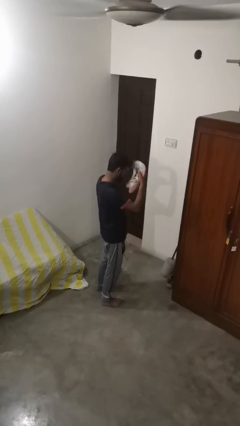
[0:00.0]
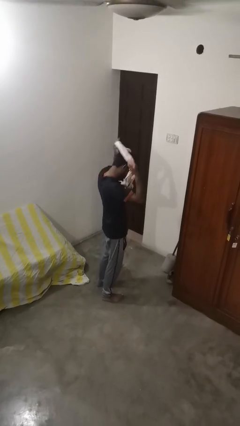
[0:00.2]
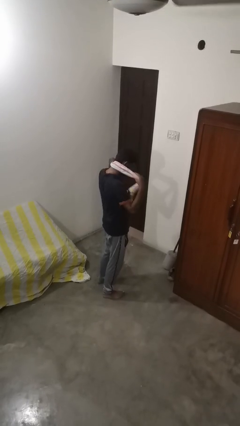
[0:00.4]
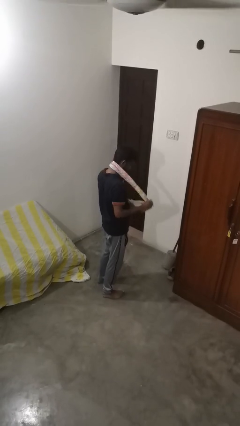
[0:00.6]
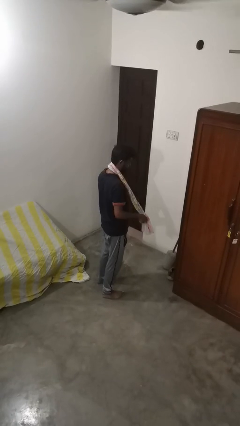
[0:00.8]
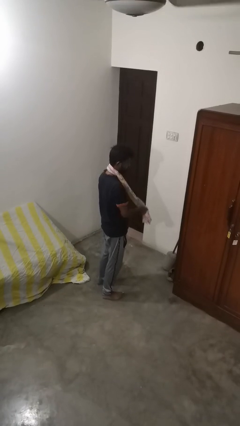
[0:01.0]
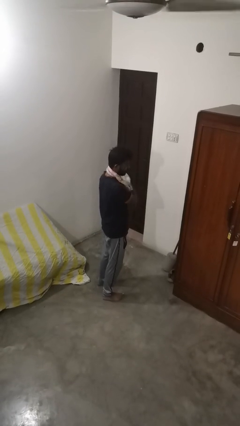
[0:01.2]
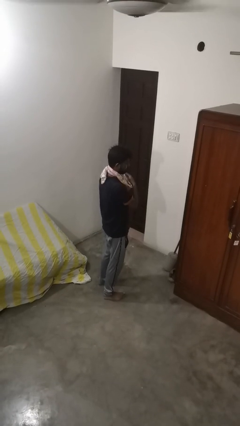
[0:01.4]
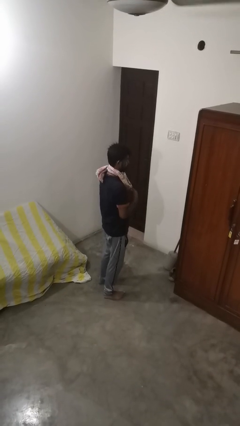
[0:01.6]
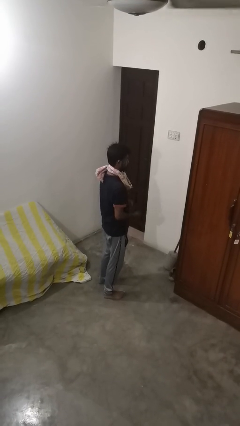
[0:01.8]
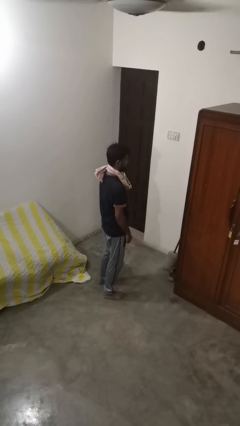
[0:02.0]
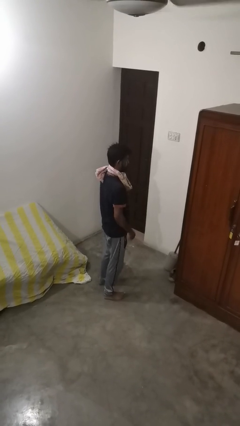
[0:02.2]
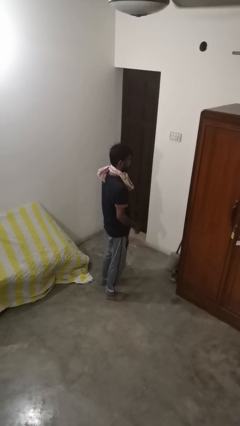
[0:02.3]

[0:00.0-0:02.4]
person puts on scarf

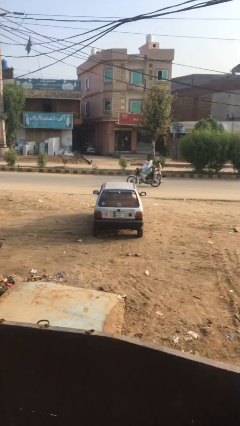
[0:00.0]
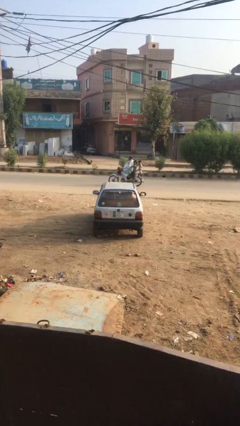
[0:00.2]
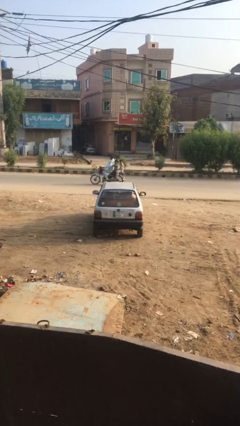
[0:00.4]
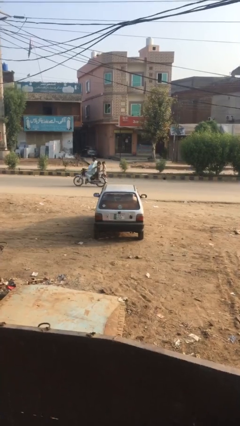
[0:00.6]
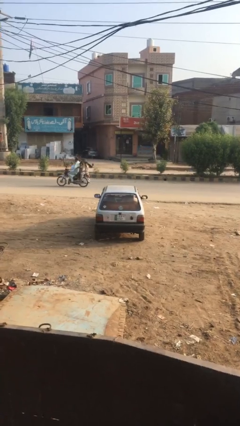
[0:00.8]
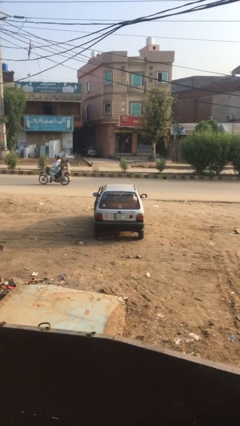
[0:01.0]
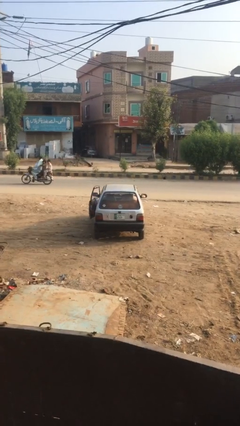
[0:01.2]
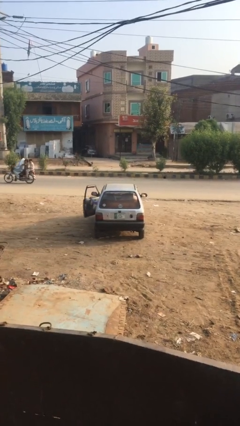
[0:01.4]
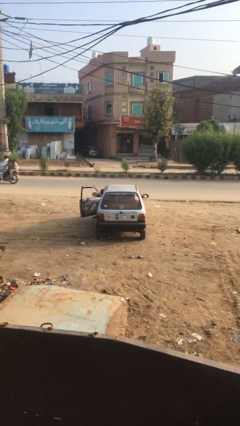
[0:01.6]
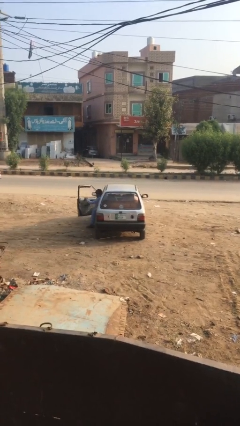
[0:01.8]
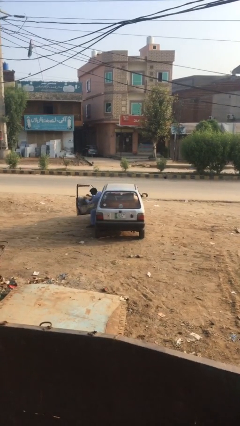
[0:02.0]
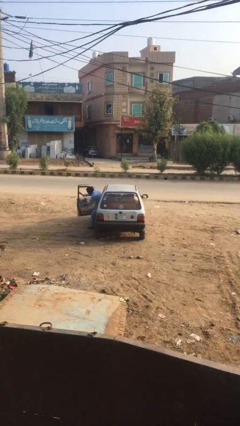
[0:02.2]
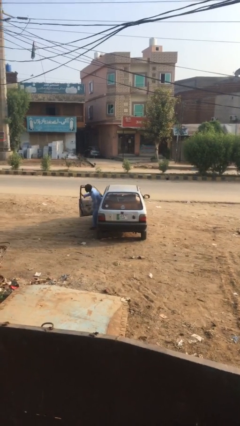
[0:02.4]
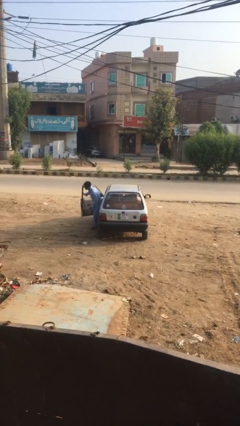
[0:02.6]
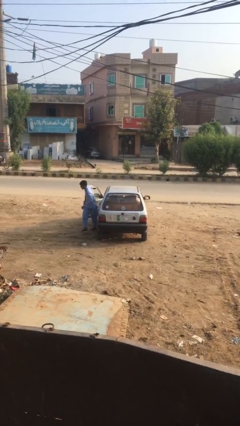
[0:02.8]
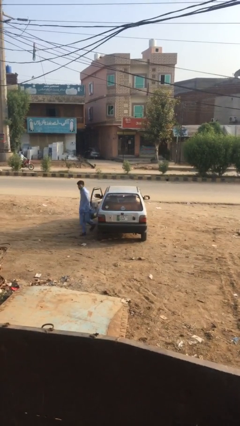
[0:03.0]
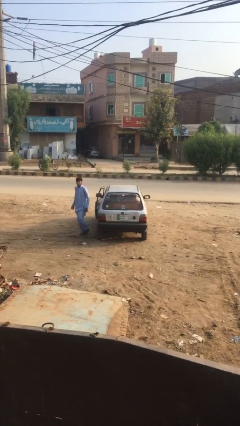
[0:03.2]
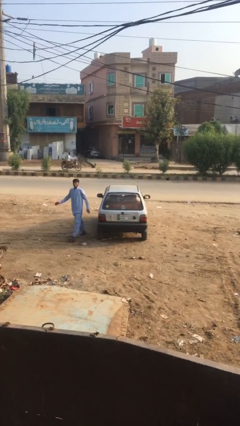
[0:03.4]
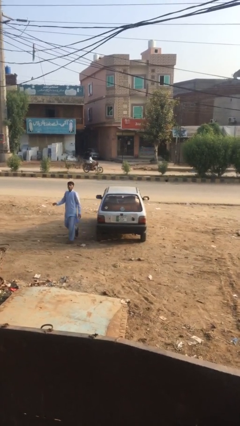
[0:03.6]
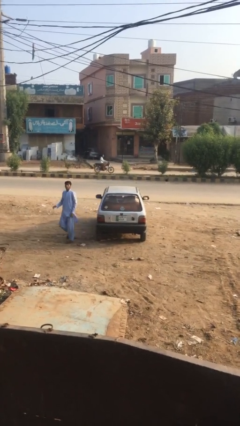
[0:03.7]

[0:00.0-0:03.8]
car drops off person

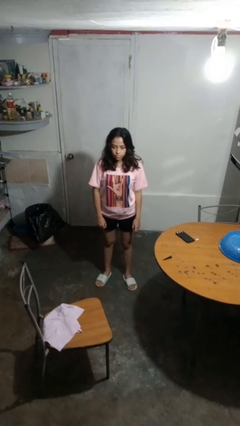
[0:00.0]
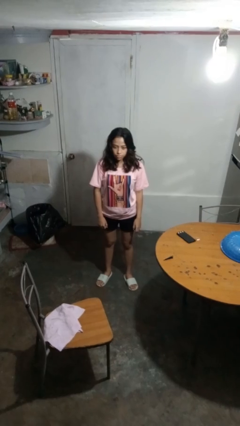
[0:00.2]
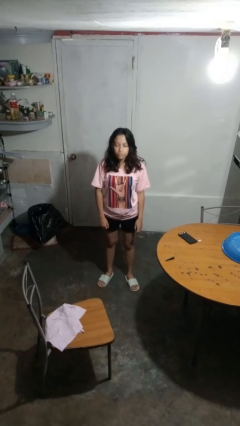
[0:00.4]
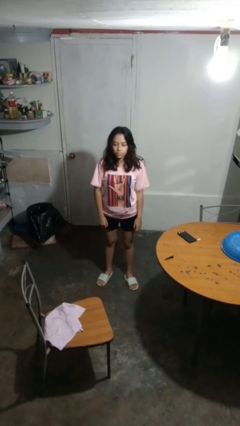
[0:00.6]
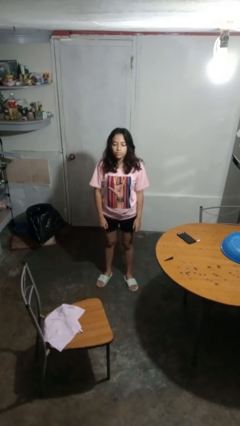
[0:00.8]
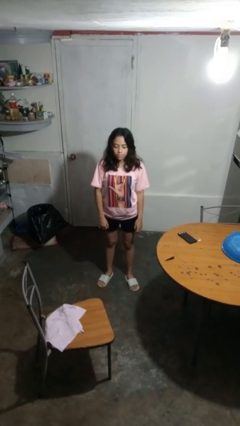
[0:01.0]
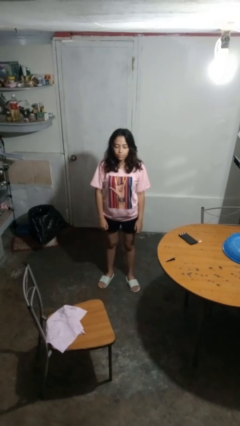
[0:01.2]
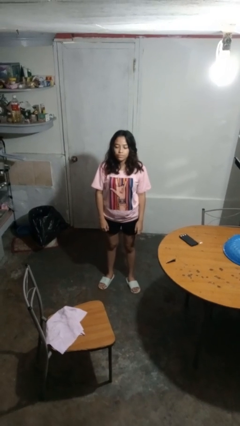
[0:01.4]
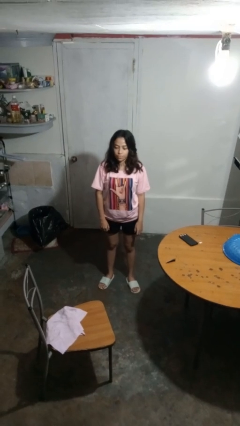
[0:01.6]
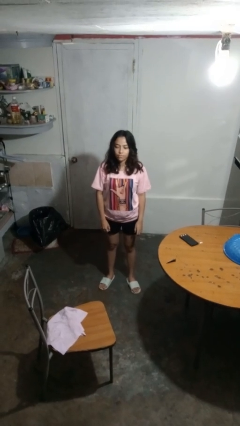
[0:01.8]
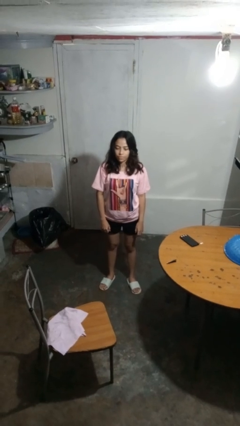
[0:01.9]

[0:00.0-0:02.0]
person nods head

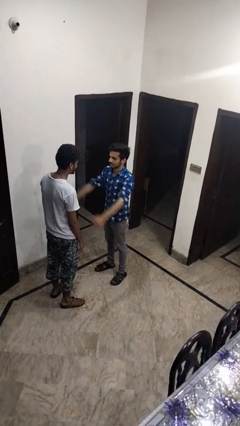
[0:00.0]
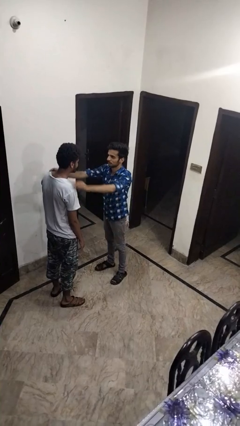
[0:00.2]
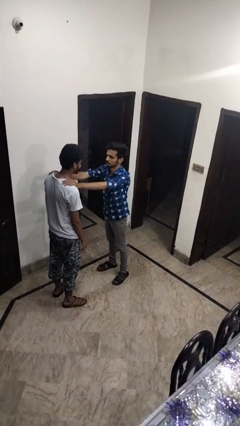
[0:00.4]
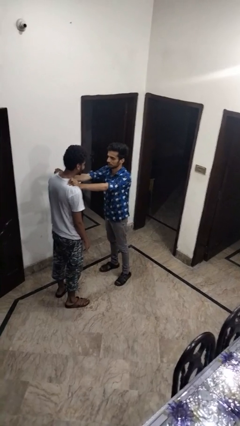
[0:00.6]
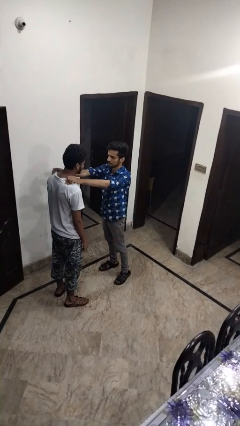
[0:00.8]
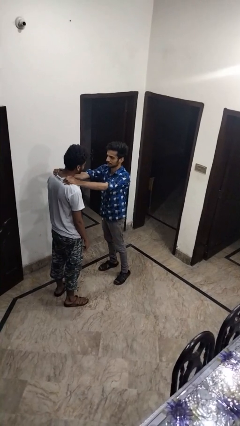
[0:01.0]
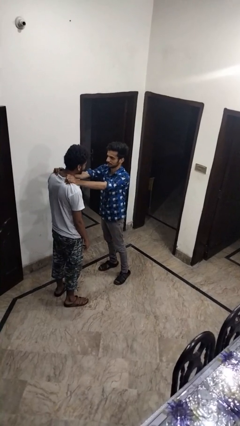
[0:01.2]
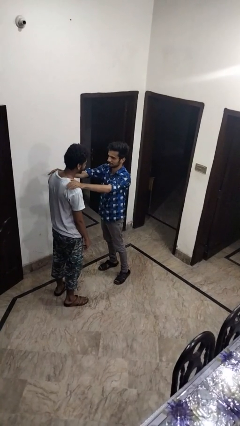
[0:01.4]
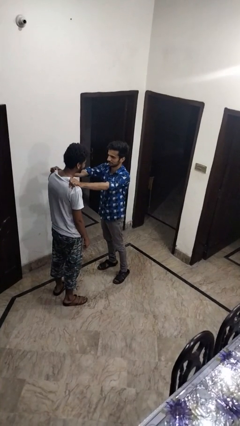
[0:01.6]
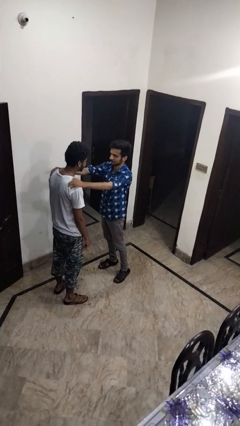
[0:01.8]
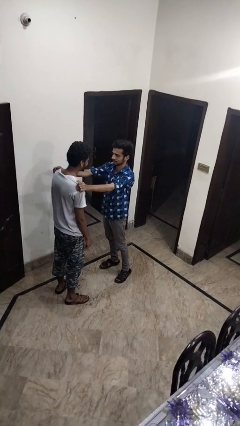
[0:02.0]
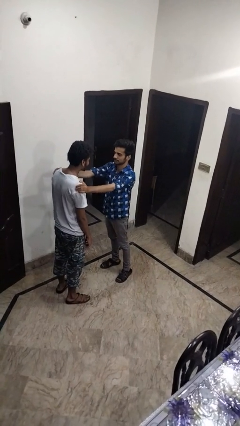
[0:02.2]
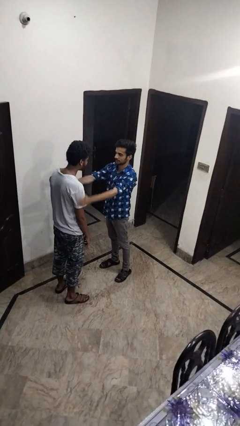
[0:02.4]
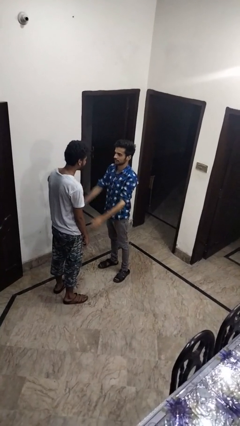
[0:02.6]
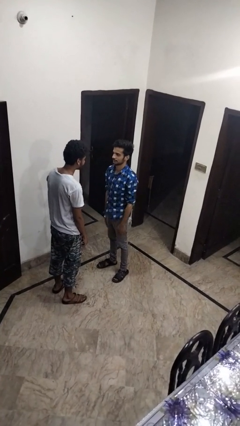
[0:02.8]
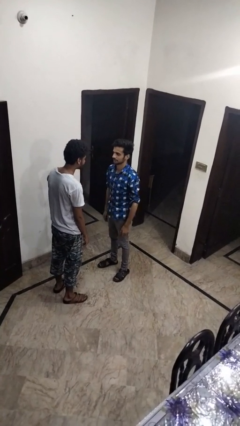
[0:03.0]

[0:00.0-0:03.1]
person pounds shoulders of person

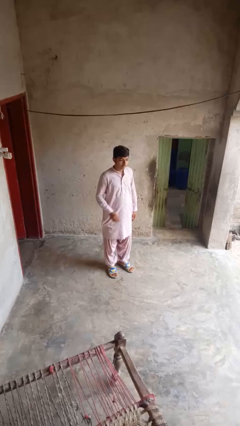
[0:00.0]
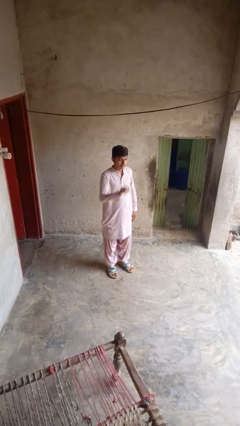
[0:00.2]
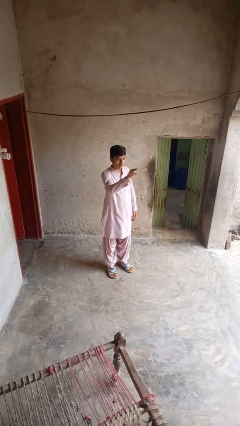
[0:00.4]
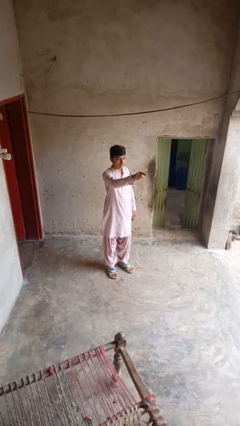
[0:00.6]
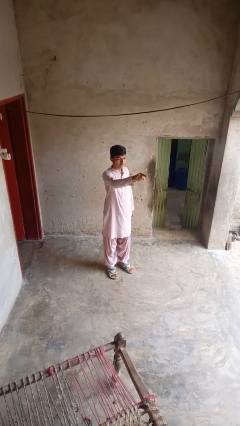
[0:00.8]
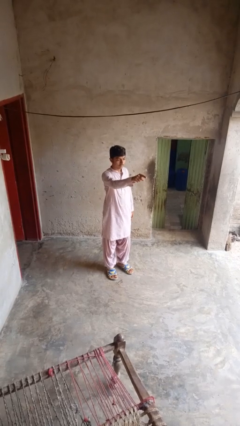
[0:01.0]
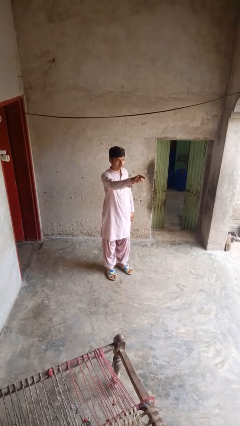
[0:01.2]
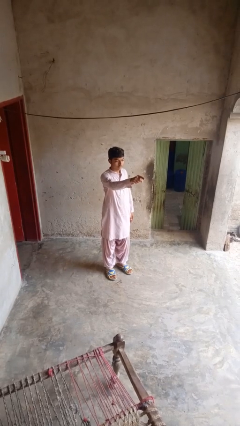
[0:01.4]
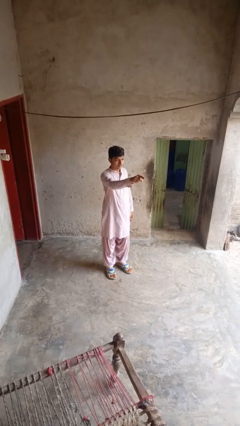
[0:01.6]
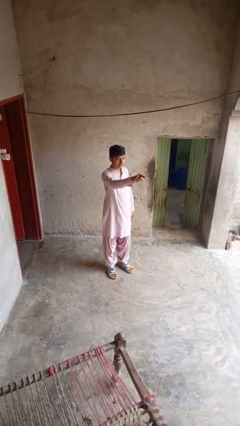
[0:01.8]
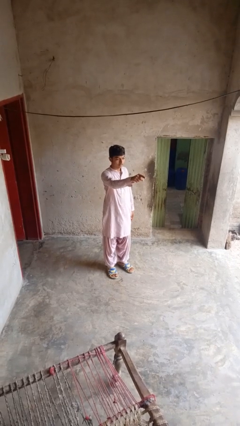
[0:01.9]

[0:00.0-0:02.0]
person points at person

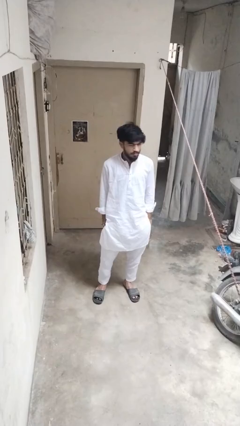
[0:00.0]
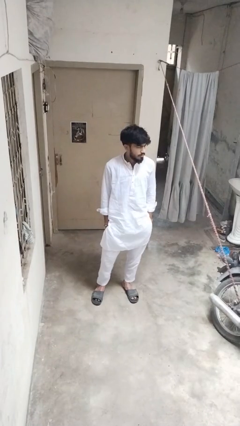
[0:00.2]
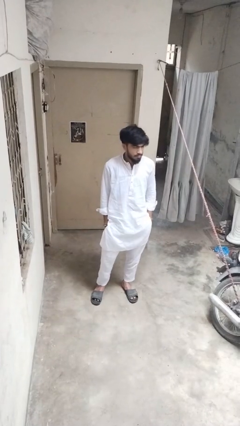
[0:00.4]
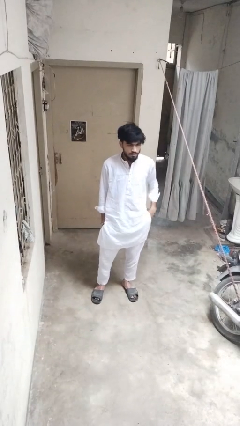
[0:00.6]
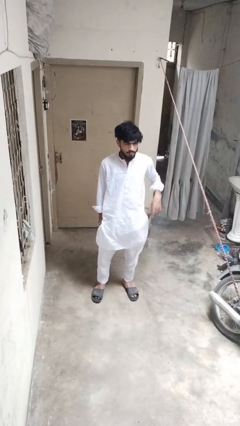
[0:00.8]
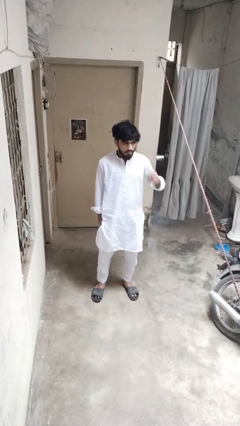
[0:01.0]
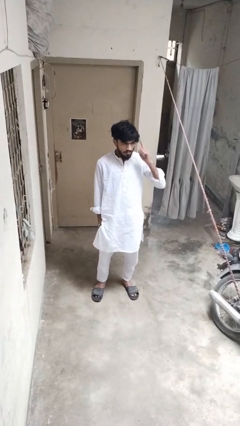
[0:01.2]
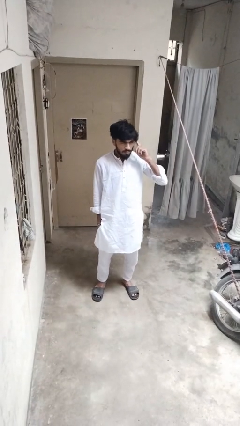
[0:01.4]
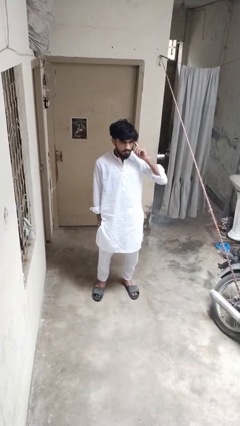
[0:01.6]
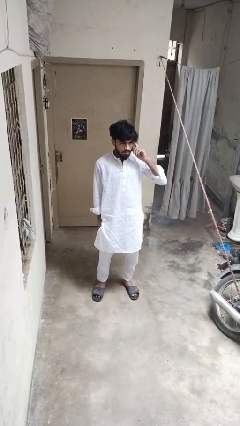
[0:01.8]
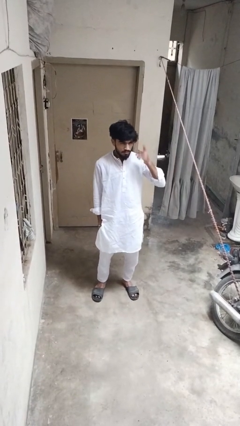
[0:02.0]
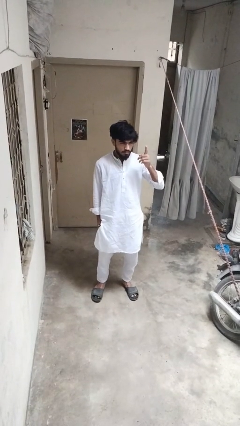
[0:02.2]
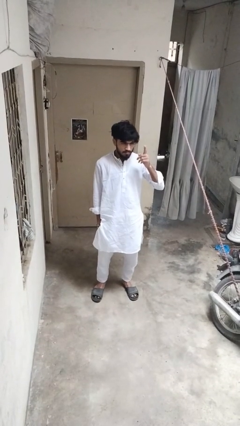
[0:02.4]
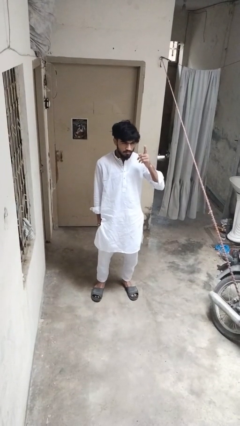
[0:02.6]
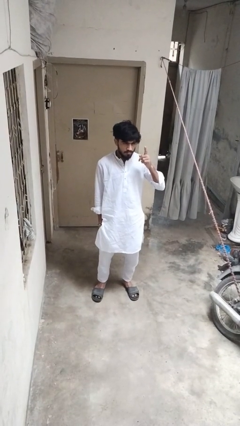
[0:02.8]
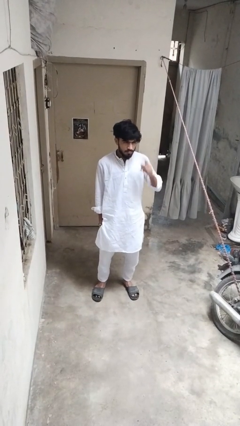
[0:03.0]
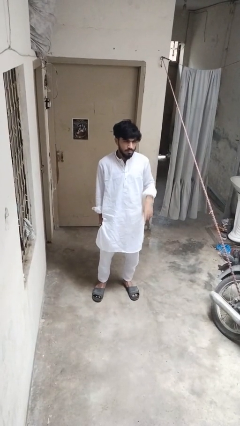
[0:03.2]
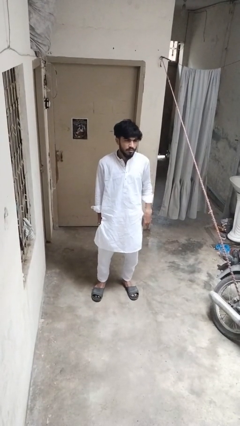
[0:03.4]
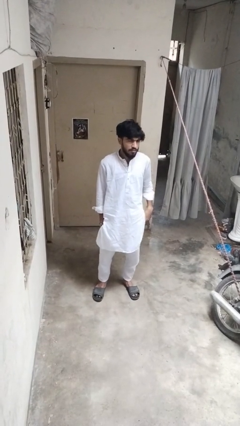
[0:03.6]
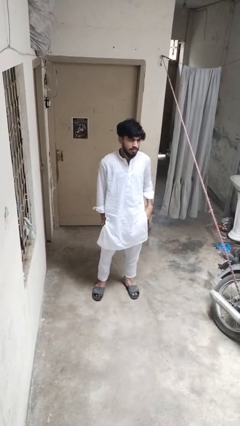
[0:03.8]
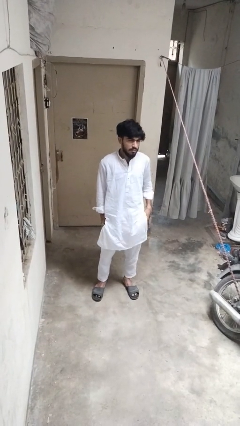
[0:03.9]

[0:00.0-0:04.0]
person gestures listen closely
